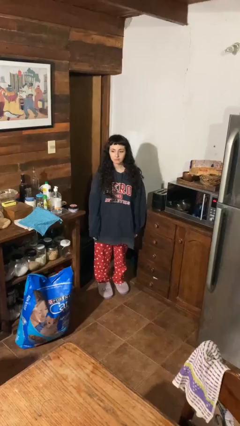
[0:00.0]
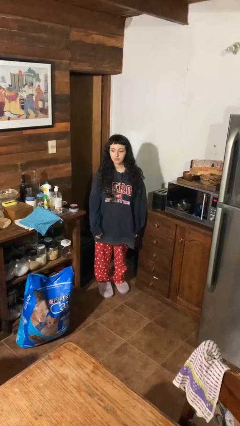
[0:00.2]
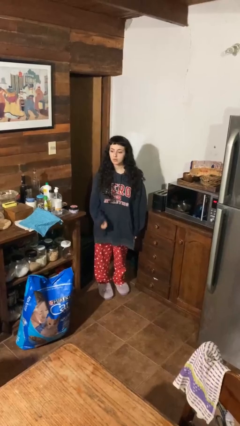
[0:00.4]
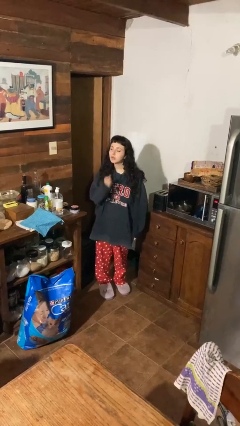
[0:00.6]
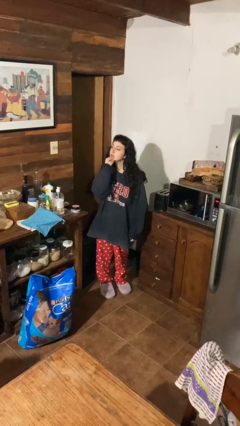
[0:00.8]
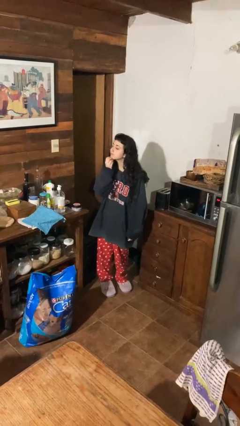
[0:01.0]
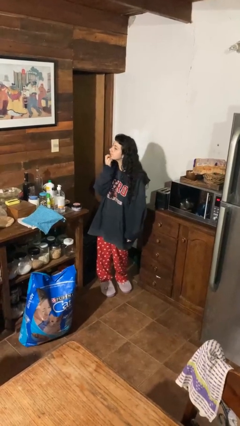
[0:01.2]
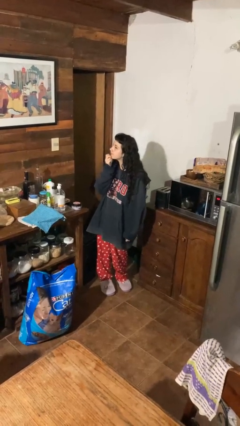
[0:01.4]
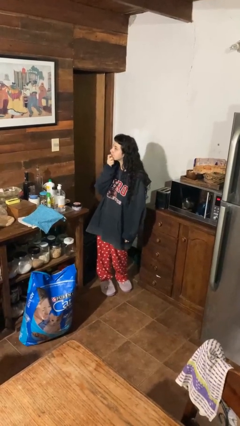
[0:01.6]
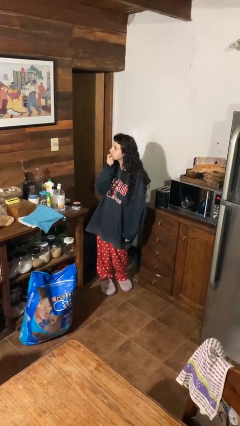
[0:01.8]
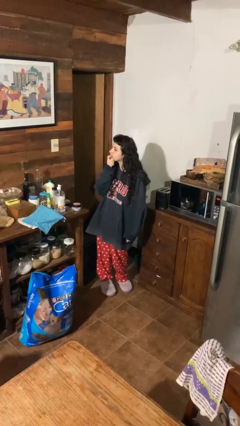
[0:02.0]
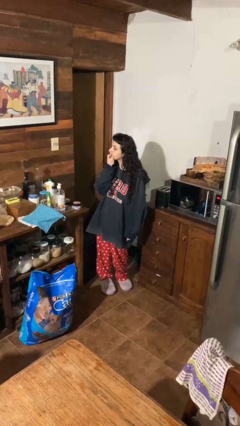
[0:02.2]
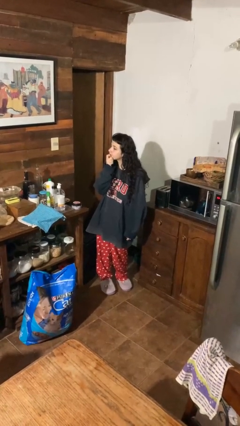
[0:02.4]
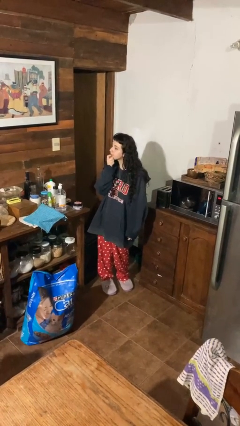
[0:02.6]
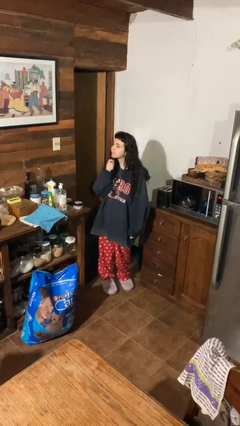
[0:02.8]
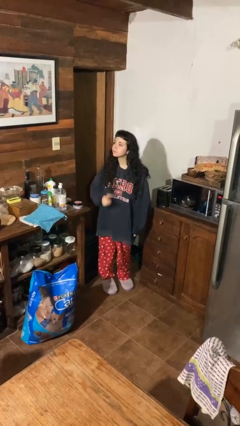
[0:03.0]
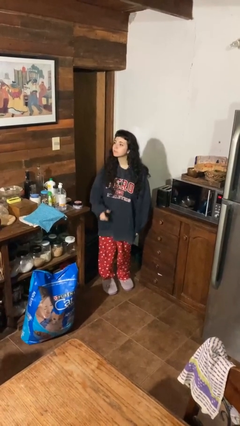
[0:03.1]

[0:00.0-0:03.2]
person strokes chin

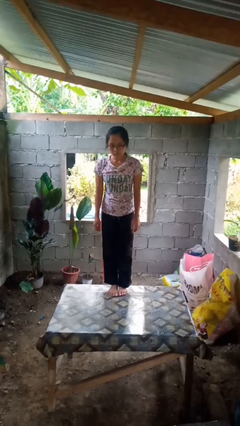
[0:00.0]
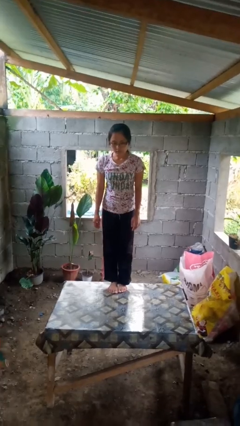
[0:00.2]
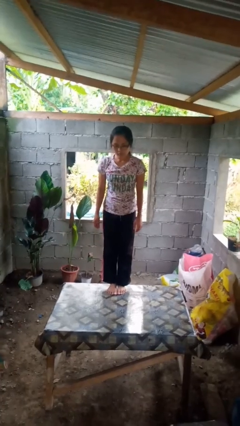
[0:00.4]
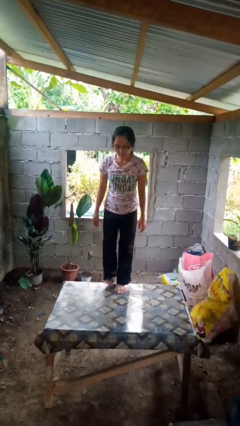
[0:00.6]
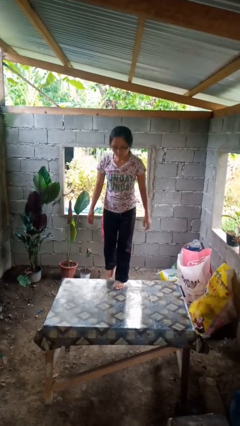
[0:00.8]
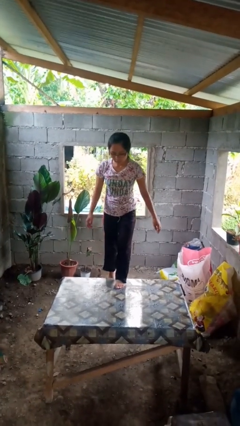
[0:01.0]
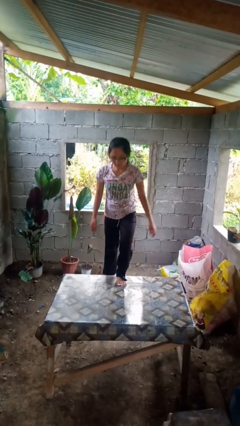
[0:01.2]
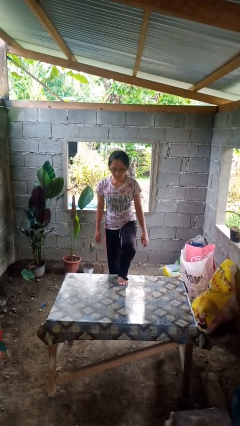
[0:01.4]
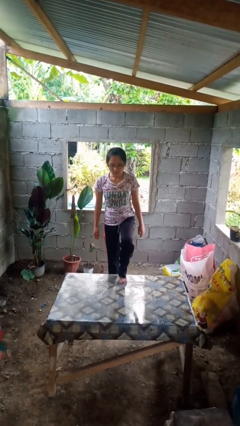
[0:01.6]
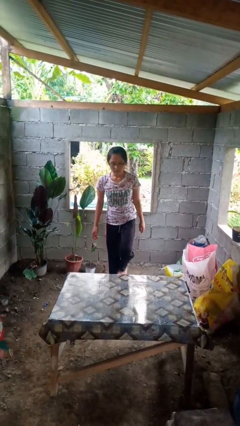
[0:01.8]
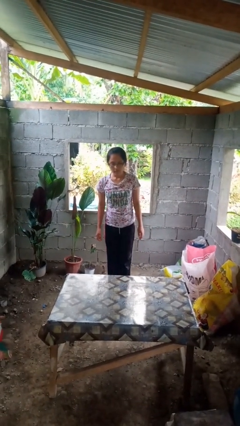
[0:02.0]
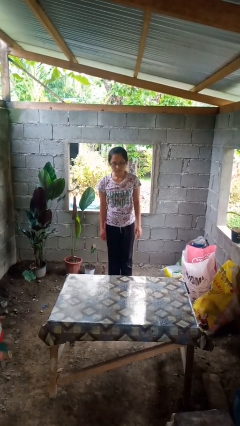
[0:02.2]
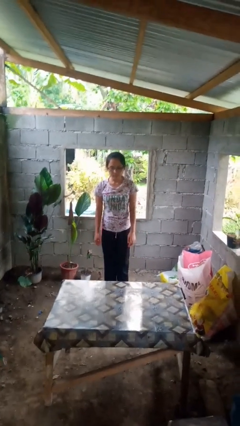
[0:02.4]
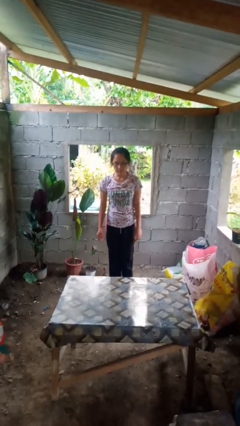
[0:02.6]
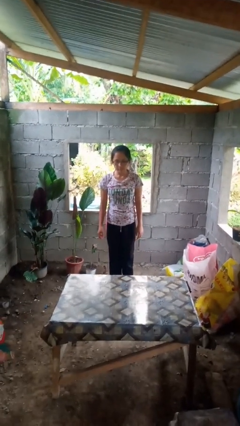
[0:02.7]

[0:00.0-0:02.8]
person climbs off table

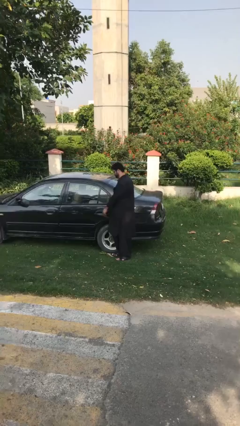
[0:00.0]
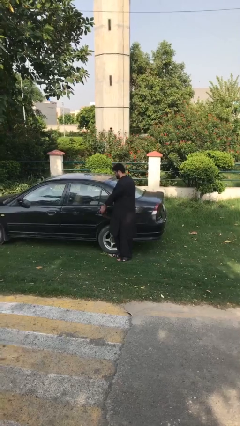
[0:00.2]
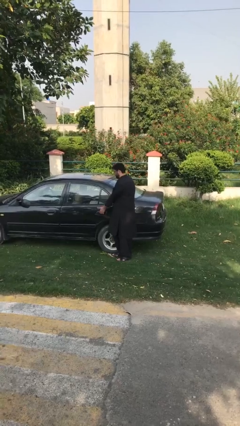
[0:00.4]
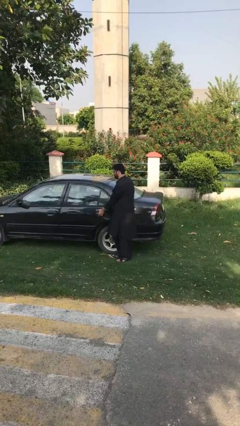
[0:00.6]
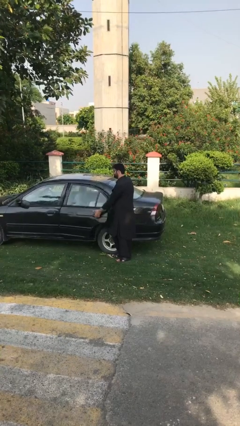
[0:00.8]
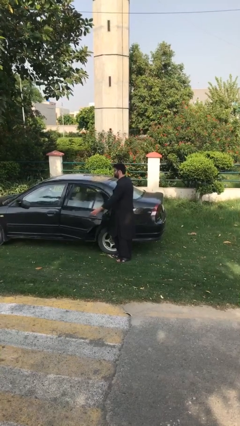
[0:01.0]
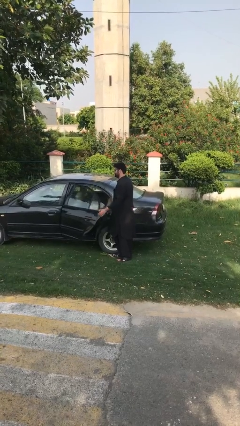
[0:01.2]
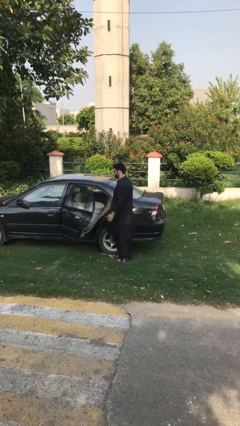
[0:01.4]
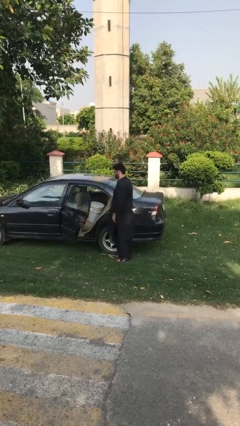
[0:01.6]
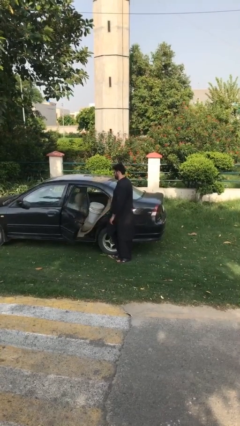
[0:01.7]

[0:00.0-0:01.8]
person opens car door

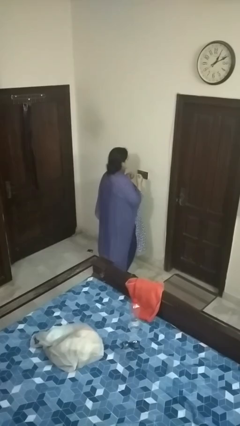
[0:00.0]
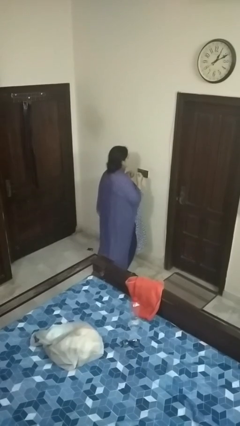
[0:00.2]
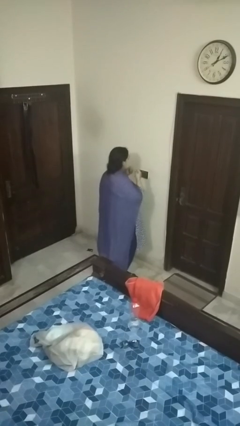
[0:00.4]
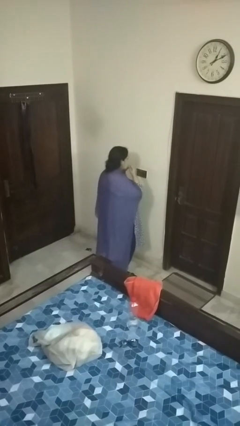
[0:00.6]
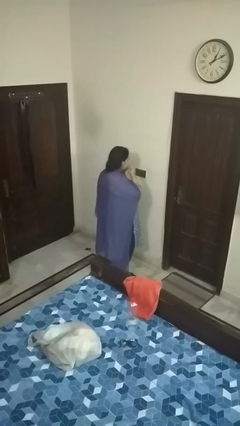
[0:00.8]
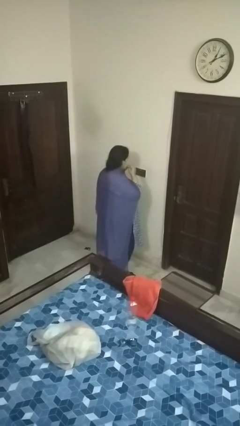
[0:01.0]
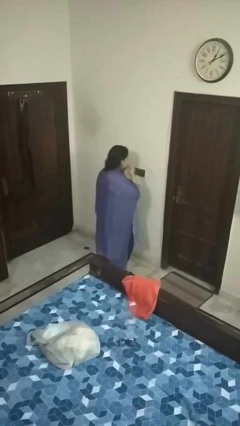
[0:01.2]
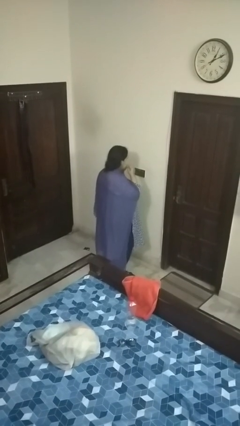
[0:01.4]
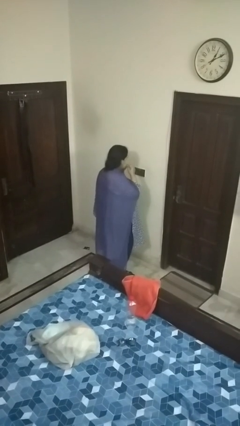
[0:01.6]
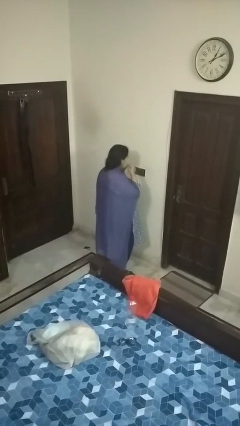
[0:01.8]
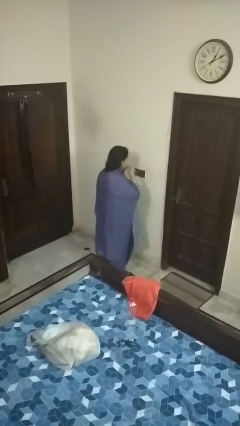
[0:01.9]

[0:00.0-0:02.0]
person flosses

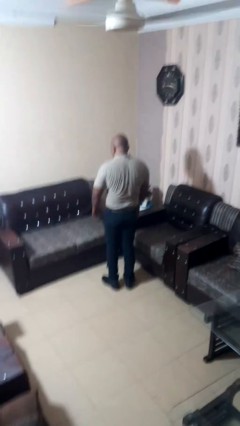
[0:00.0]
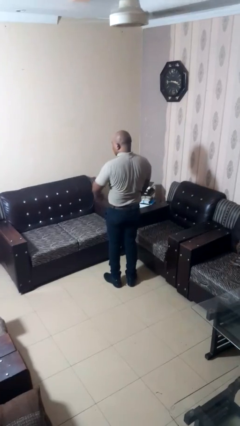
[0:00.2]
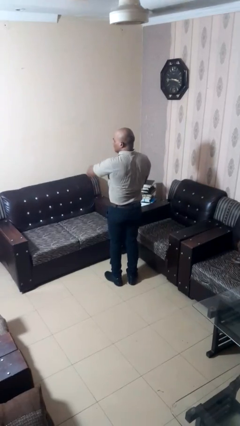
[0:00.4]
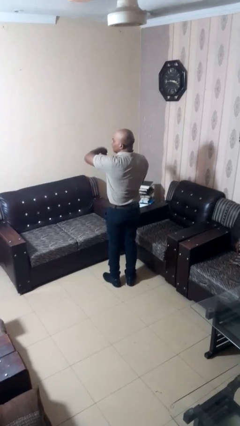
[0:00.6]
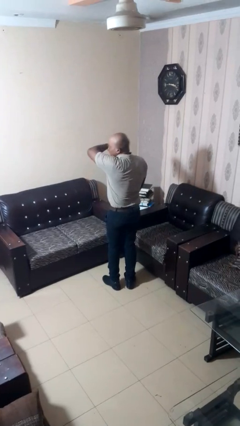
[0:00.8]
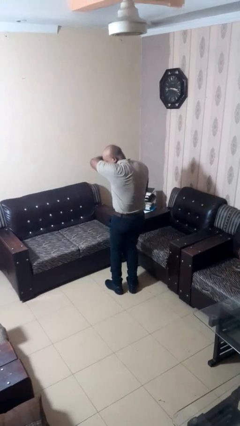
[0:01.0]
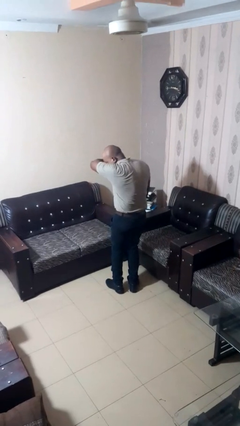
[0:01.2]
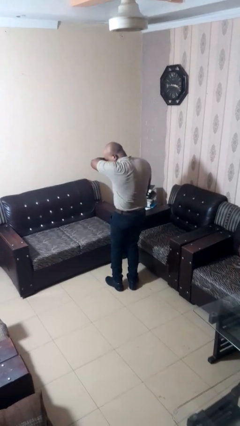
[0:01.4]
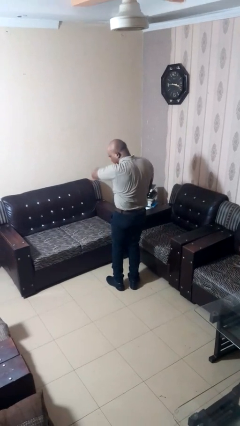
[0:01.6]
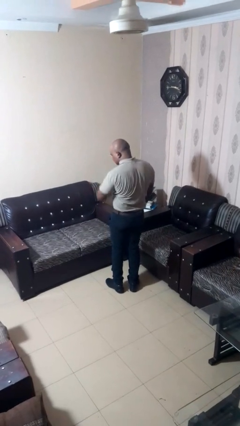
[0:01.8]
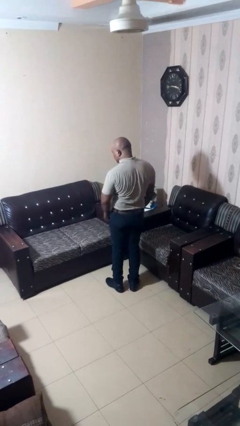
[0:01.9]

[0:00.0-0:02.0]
person sneezes into arm

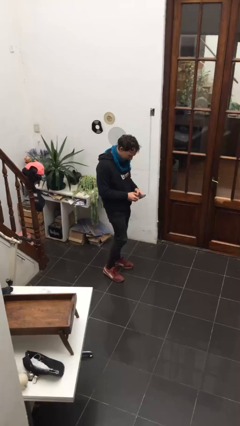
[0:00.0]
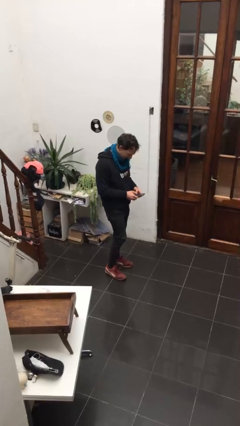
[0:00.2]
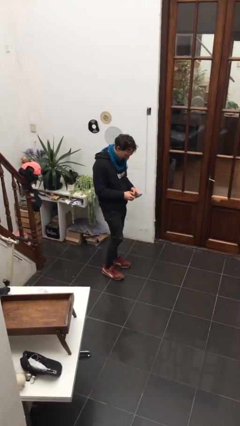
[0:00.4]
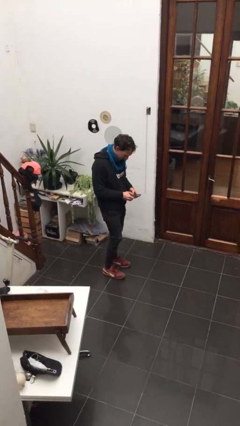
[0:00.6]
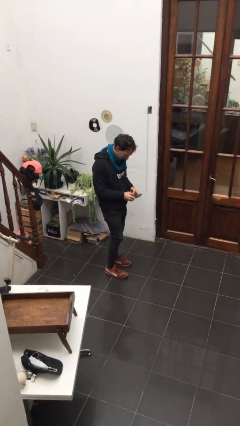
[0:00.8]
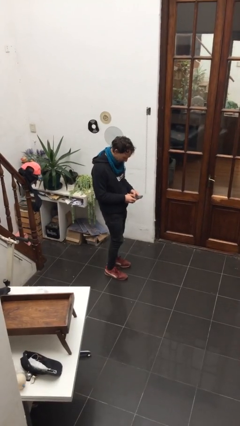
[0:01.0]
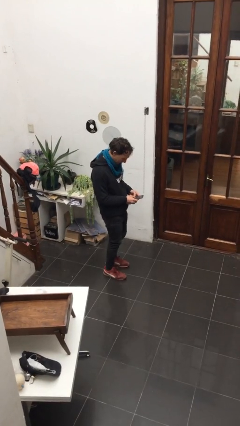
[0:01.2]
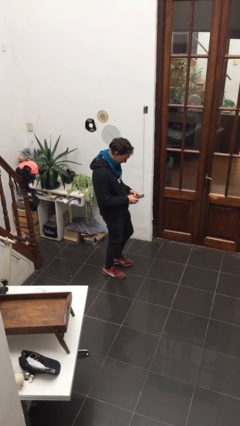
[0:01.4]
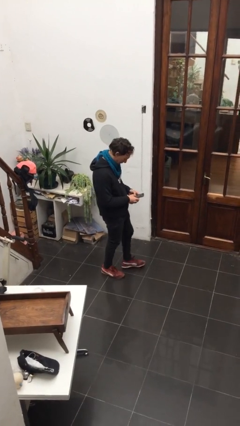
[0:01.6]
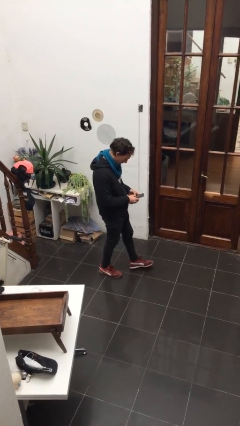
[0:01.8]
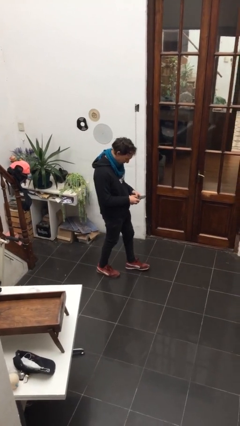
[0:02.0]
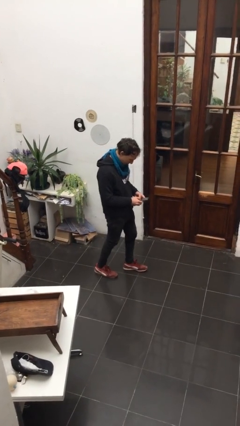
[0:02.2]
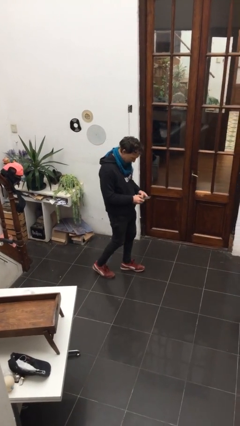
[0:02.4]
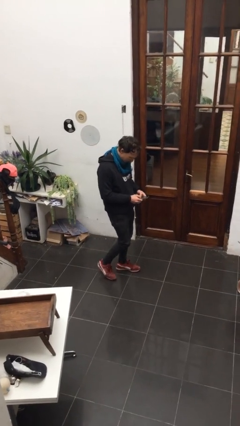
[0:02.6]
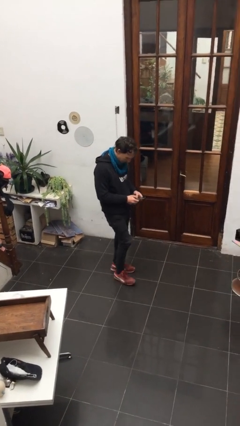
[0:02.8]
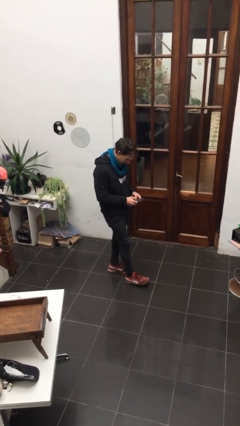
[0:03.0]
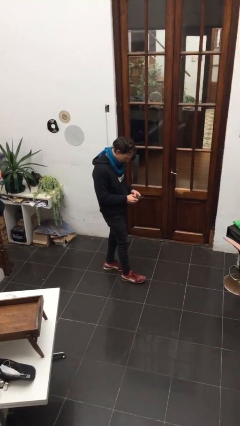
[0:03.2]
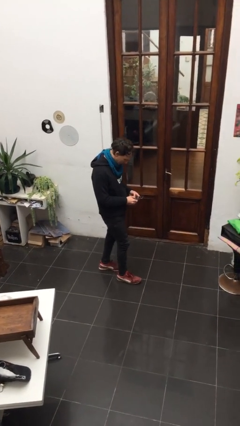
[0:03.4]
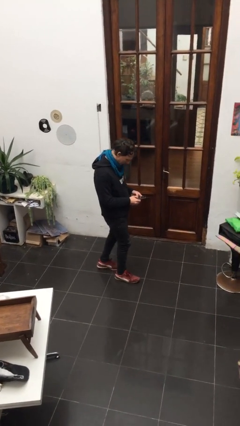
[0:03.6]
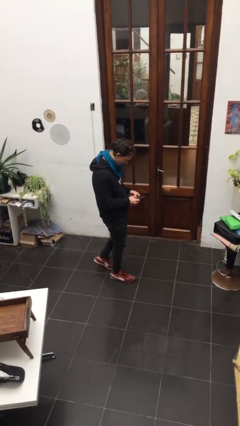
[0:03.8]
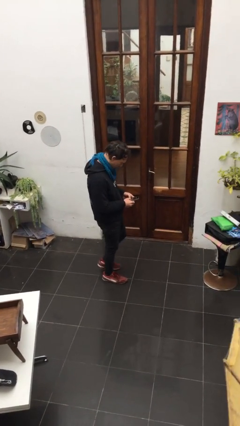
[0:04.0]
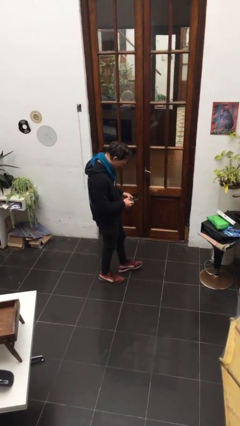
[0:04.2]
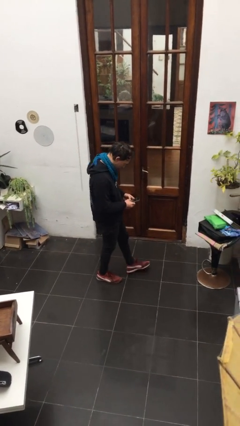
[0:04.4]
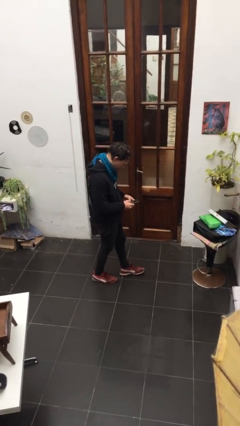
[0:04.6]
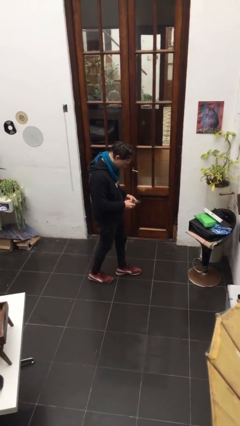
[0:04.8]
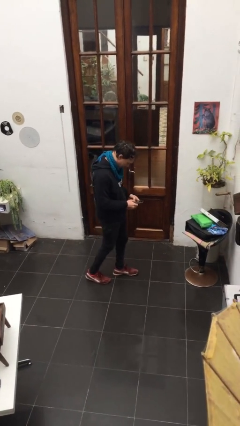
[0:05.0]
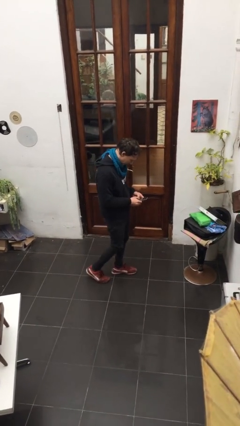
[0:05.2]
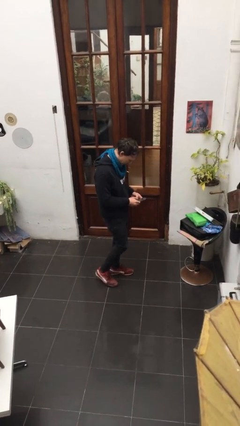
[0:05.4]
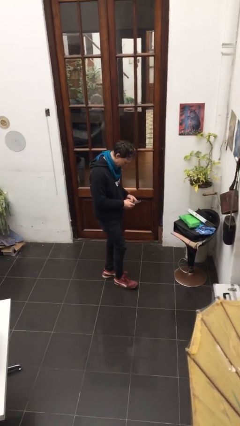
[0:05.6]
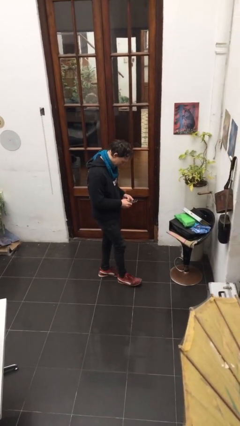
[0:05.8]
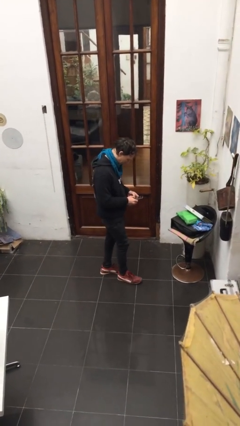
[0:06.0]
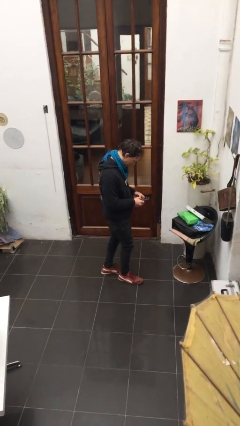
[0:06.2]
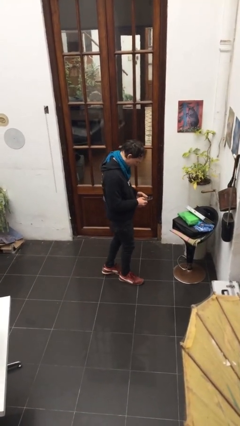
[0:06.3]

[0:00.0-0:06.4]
person texts on phone
